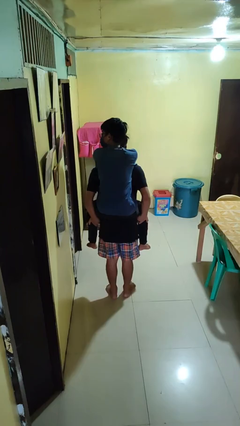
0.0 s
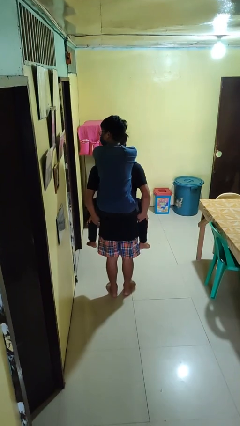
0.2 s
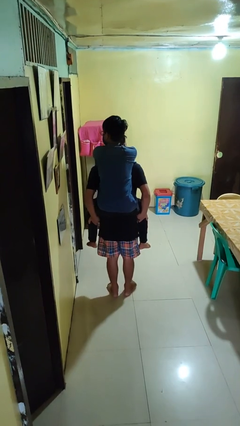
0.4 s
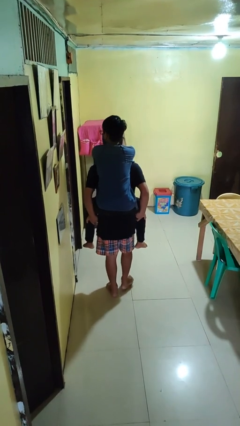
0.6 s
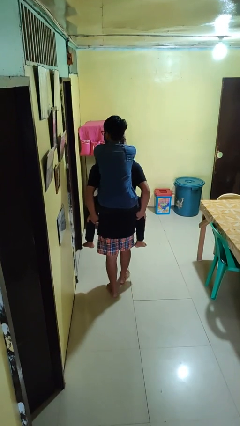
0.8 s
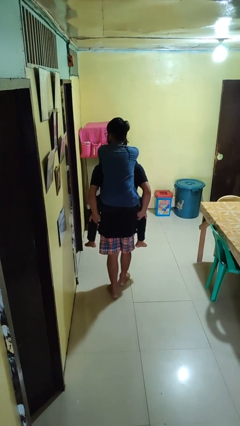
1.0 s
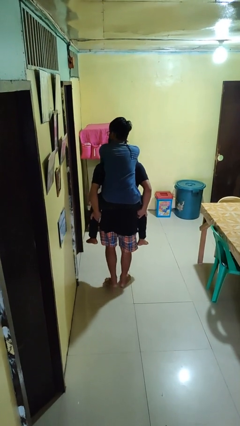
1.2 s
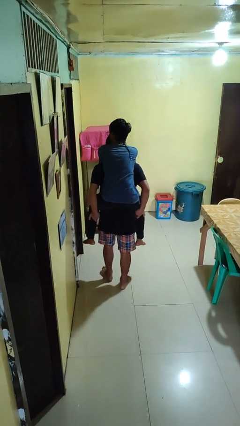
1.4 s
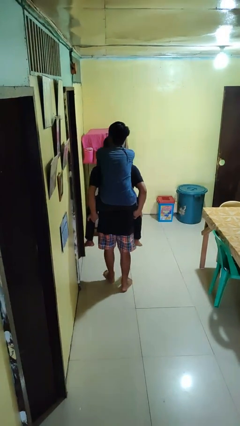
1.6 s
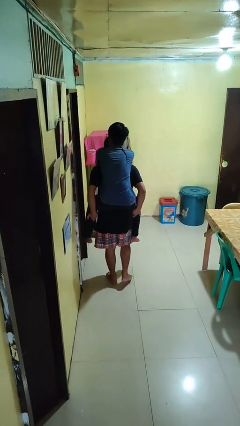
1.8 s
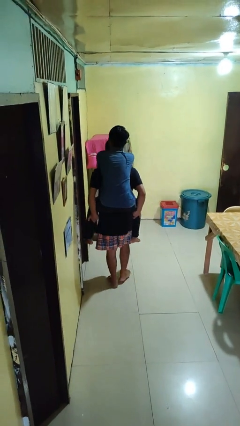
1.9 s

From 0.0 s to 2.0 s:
person carries person on back

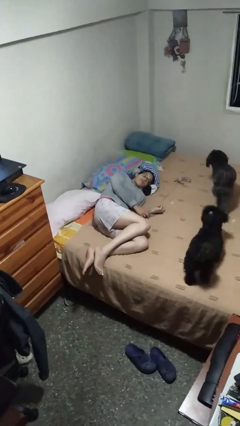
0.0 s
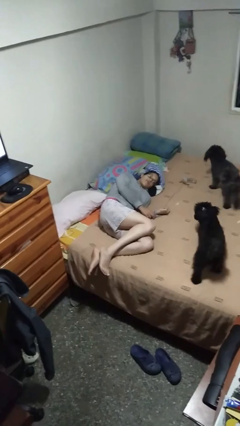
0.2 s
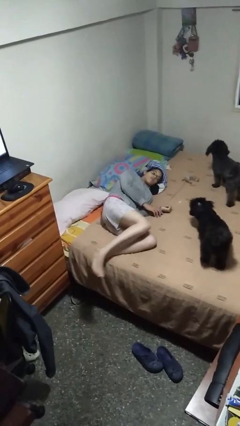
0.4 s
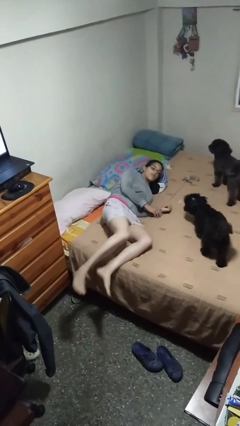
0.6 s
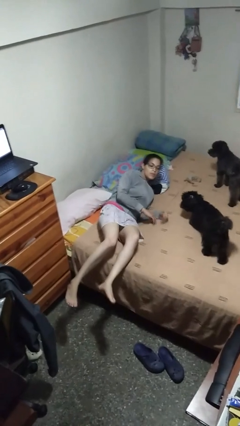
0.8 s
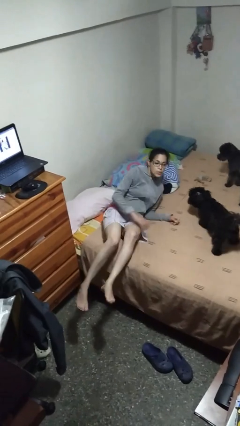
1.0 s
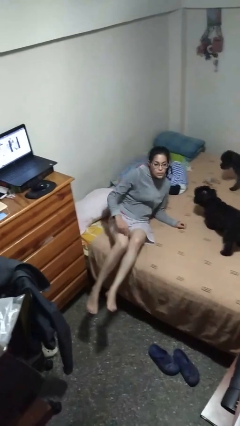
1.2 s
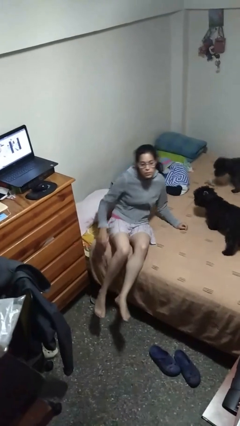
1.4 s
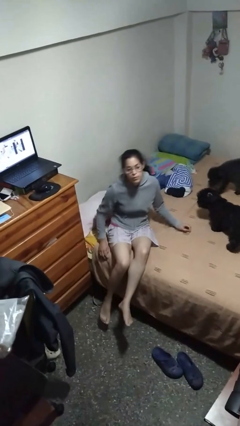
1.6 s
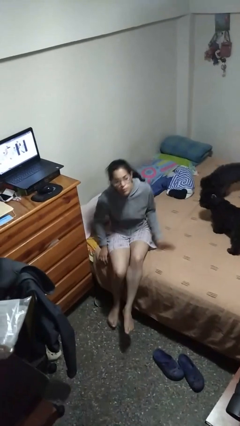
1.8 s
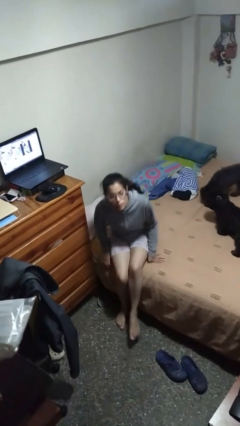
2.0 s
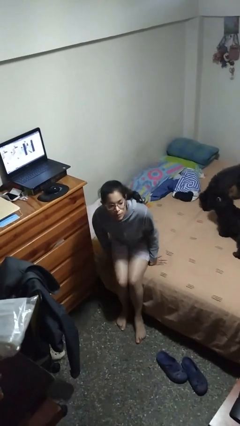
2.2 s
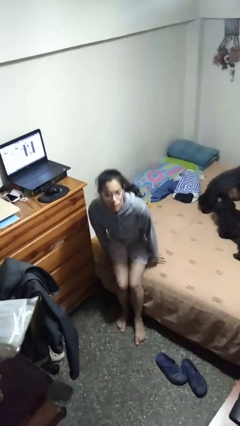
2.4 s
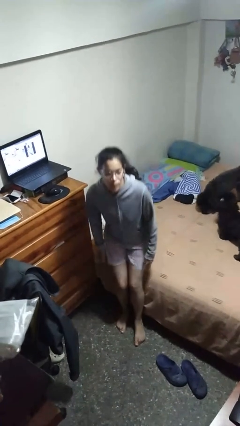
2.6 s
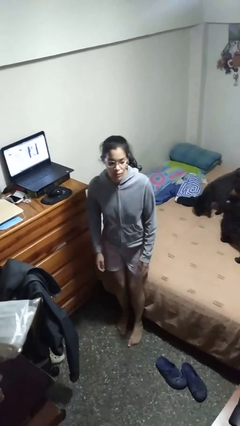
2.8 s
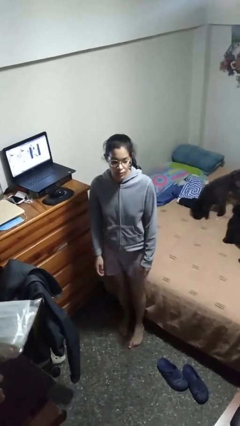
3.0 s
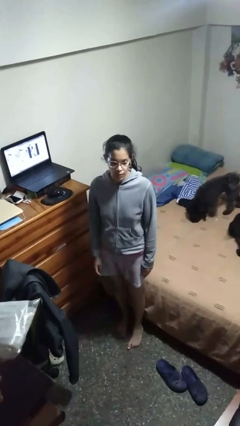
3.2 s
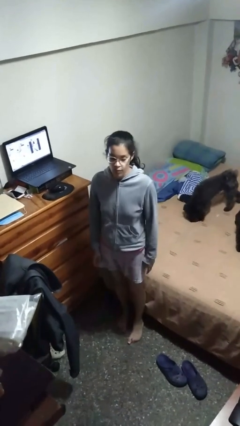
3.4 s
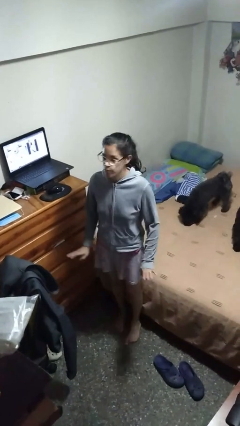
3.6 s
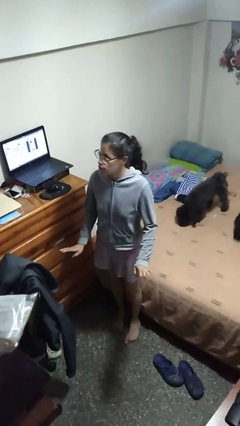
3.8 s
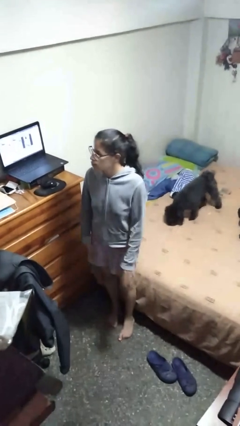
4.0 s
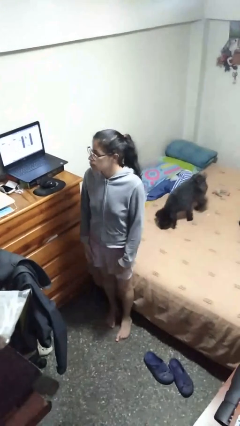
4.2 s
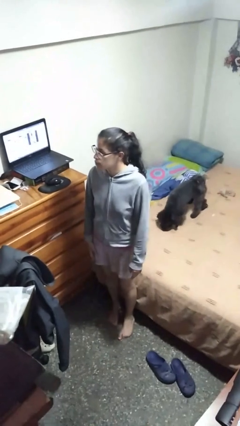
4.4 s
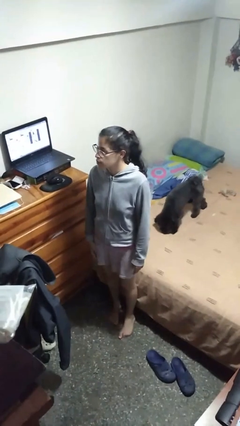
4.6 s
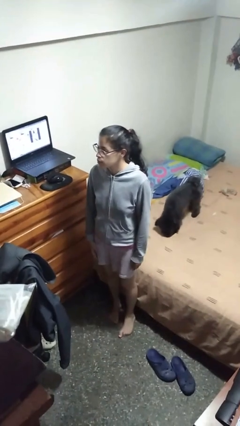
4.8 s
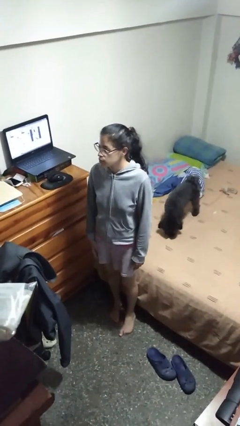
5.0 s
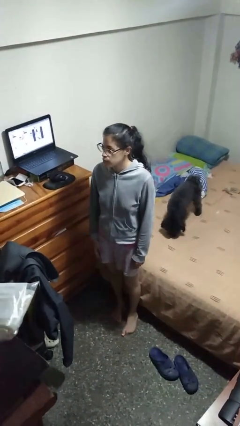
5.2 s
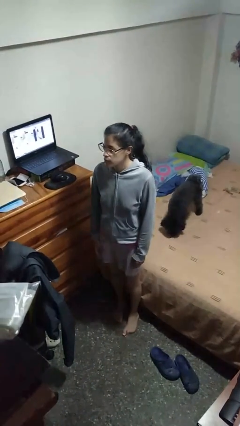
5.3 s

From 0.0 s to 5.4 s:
person stands up

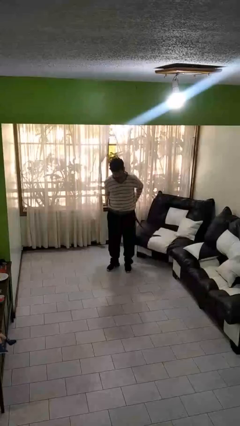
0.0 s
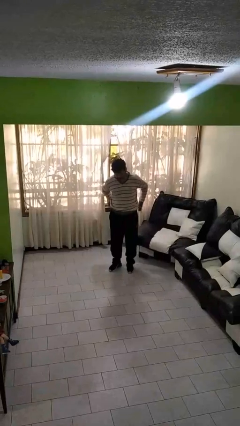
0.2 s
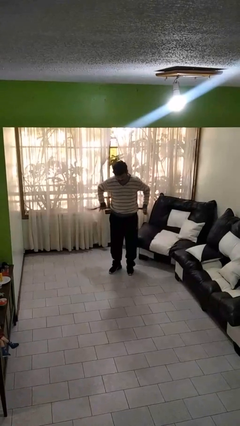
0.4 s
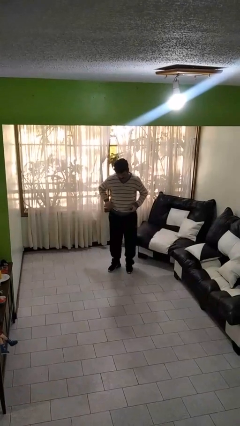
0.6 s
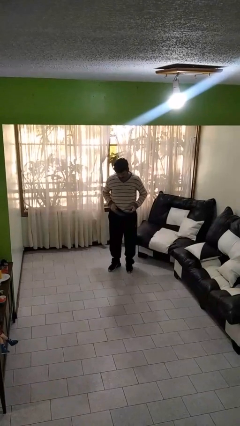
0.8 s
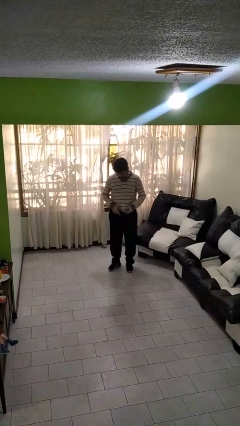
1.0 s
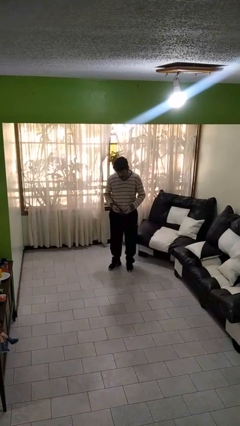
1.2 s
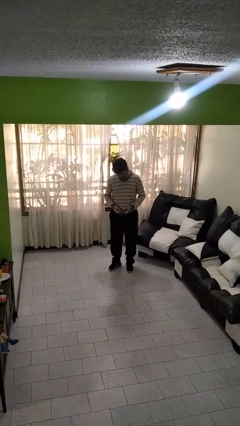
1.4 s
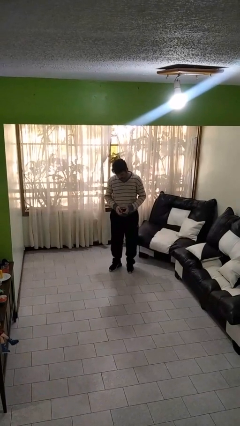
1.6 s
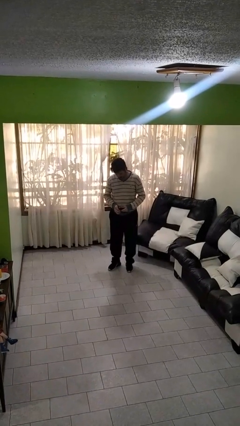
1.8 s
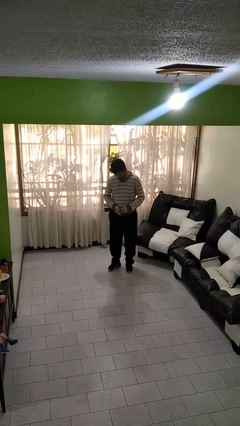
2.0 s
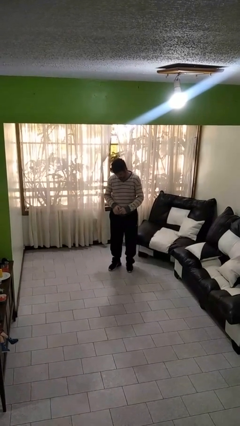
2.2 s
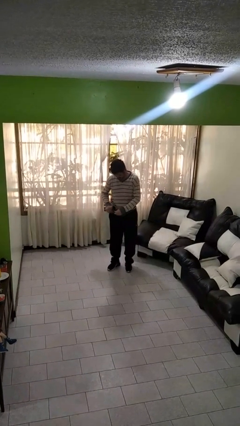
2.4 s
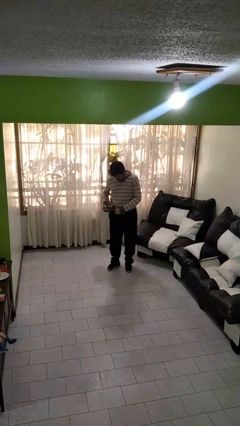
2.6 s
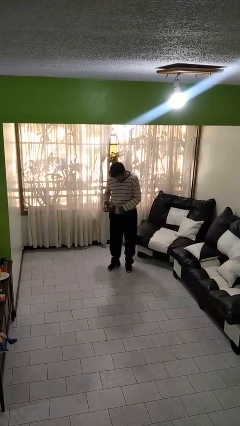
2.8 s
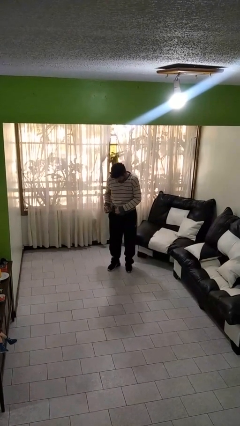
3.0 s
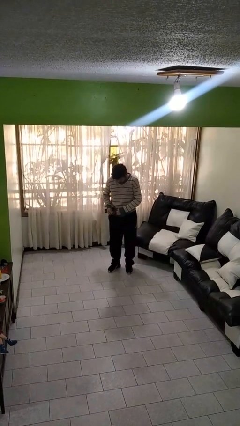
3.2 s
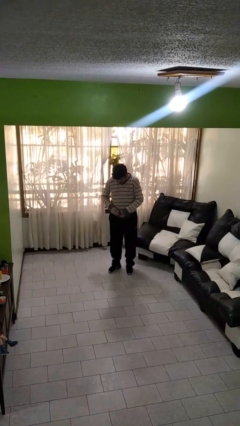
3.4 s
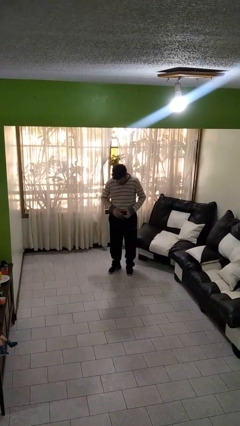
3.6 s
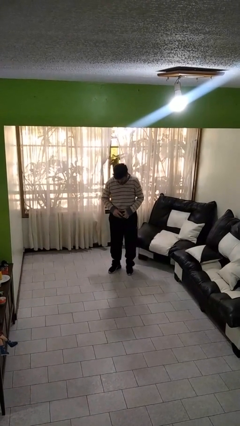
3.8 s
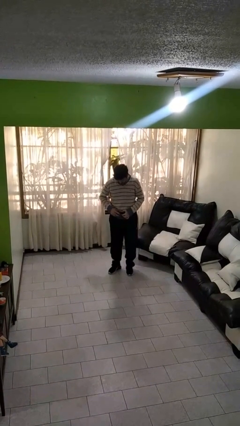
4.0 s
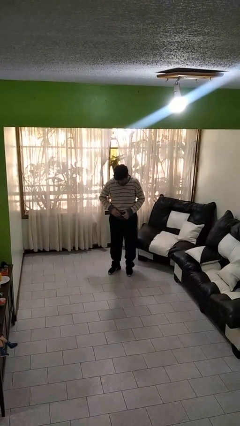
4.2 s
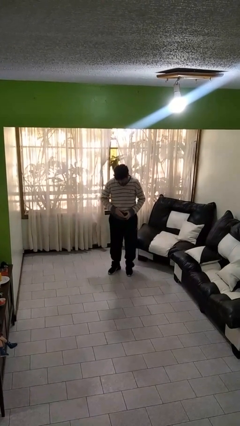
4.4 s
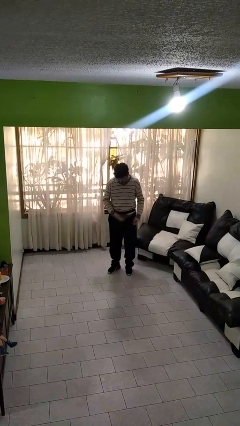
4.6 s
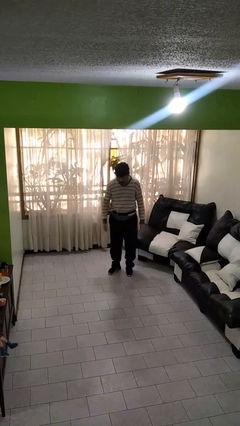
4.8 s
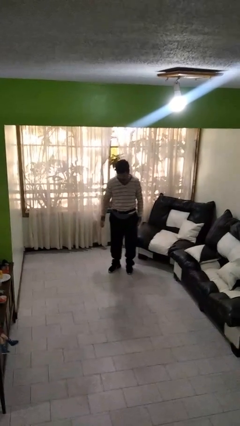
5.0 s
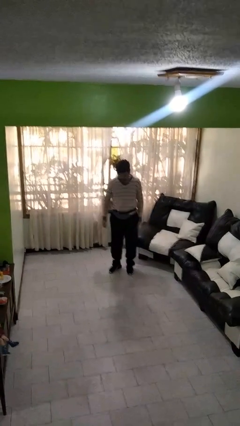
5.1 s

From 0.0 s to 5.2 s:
person puts on belt

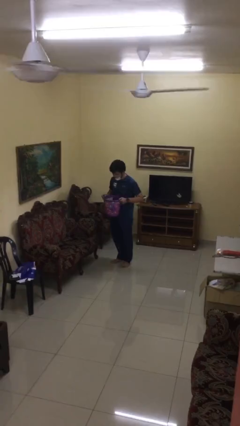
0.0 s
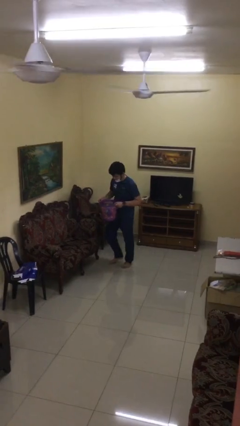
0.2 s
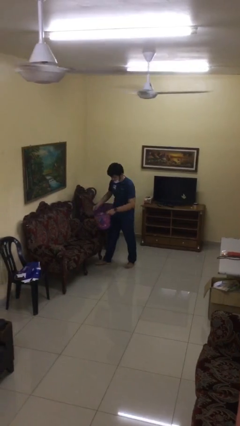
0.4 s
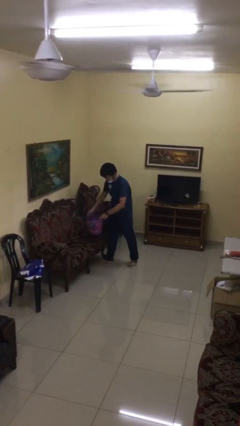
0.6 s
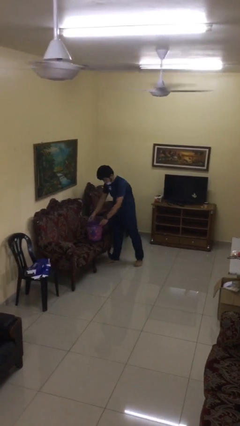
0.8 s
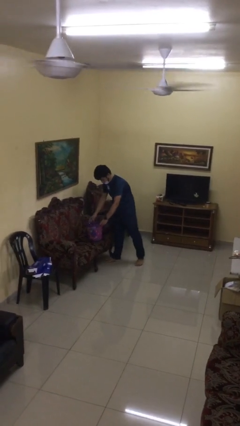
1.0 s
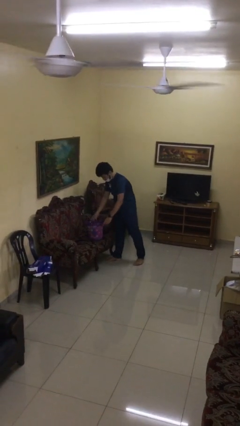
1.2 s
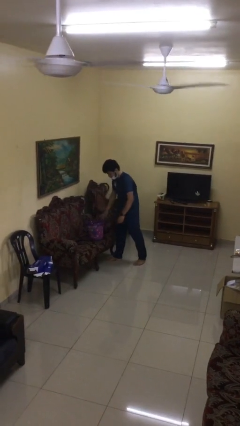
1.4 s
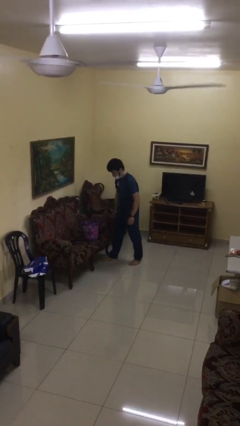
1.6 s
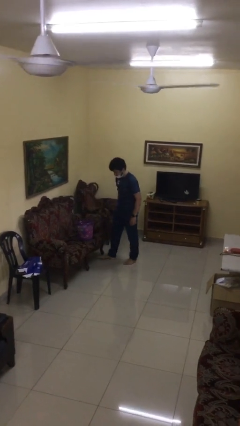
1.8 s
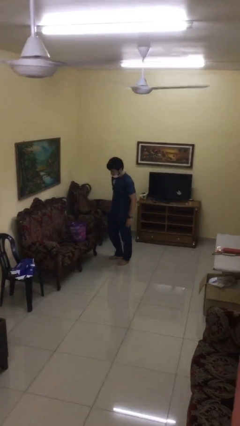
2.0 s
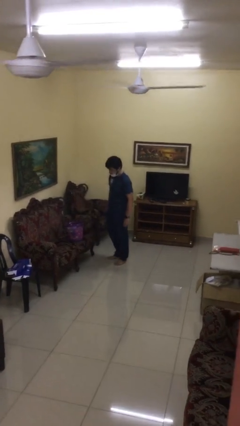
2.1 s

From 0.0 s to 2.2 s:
person puts down object on couch

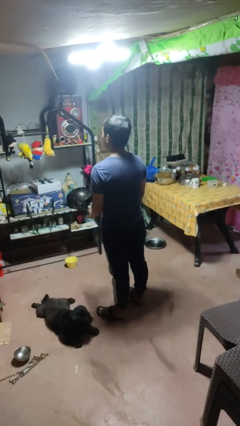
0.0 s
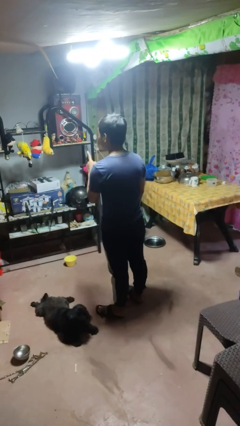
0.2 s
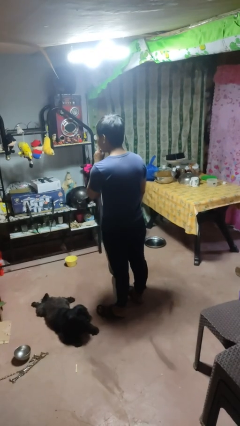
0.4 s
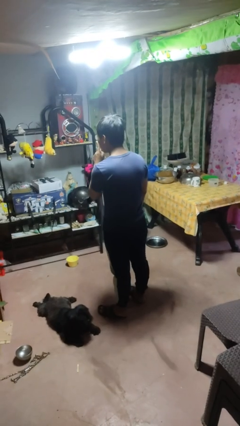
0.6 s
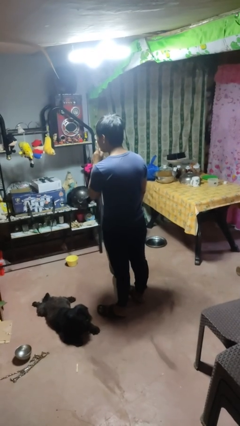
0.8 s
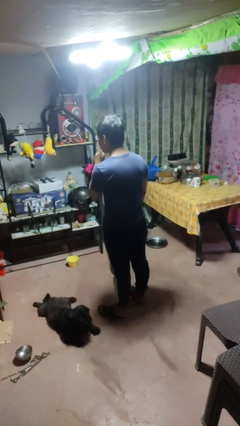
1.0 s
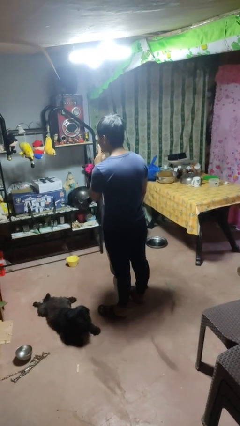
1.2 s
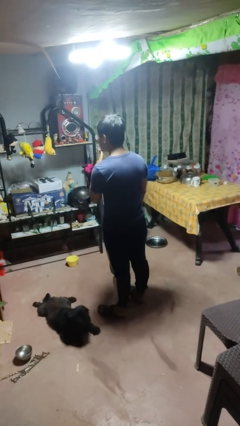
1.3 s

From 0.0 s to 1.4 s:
person gestures be quiet

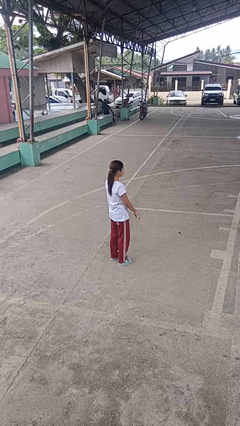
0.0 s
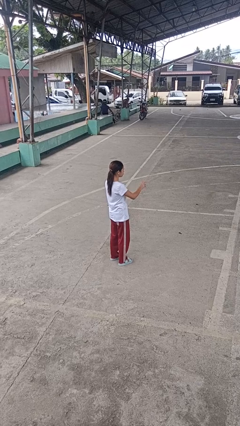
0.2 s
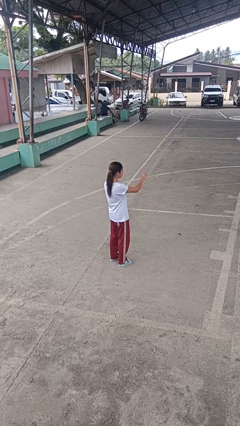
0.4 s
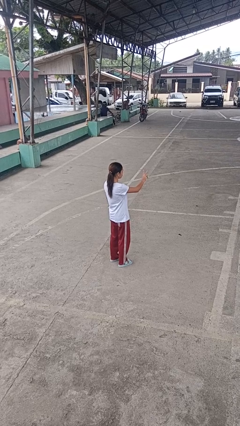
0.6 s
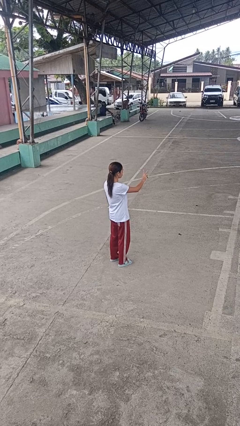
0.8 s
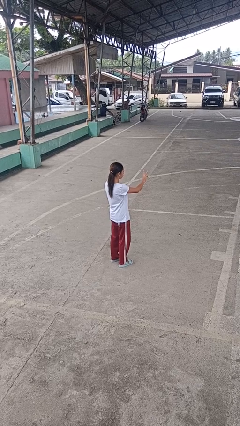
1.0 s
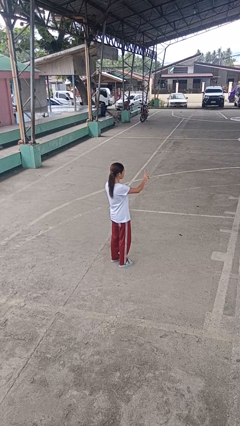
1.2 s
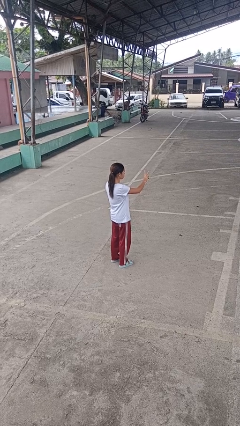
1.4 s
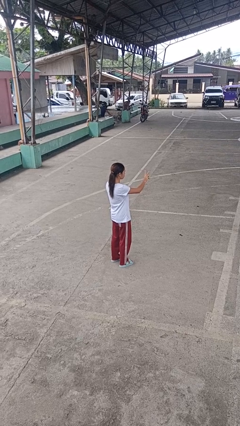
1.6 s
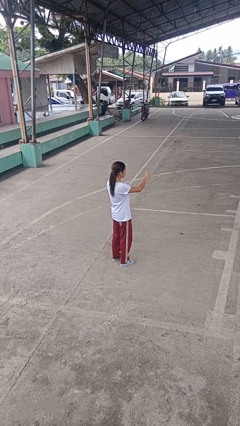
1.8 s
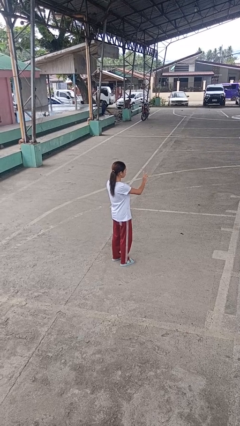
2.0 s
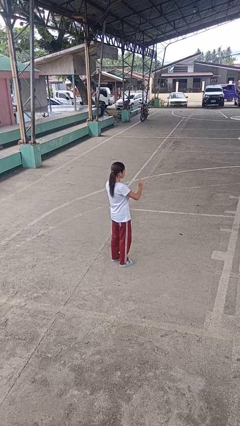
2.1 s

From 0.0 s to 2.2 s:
person gestures peace
